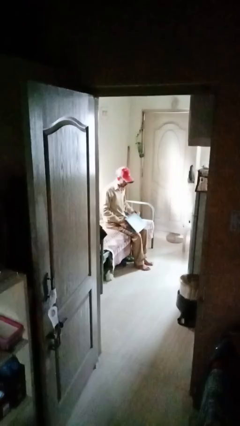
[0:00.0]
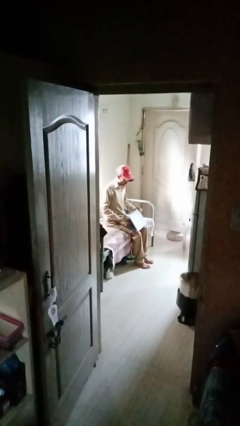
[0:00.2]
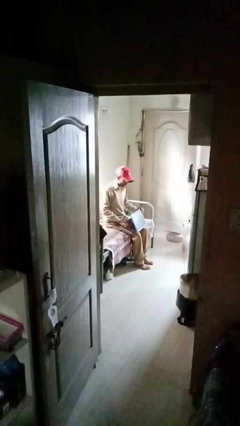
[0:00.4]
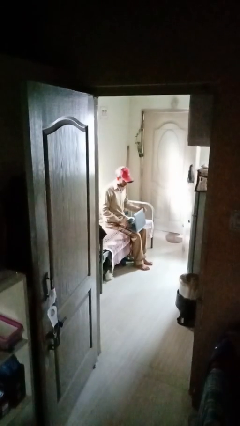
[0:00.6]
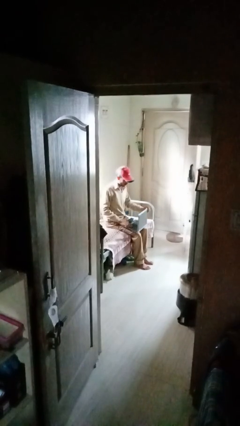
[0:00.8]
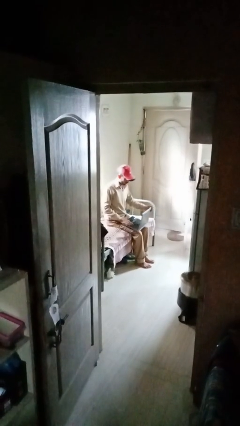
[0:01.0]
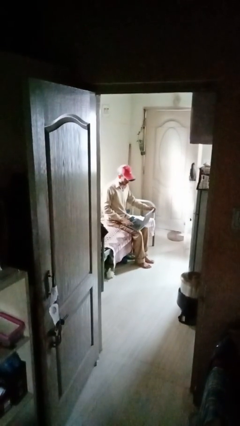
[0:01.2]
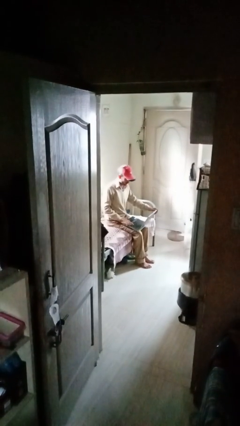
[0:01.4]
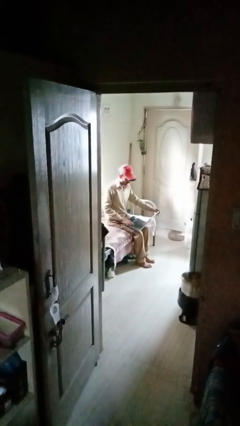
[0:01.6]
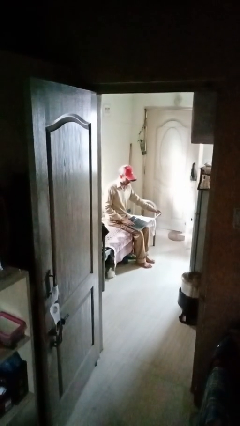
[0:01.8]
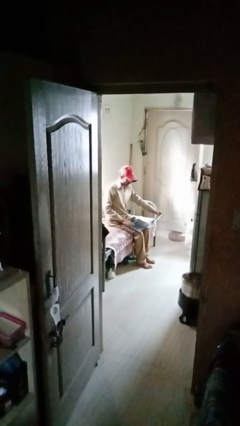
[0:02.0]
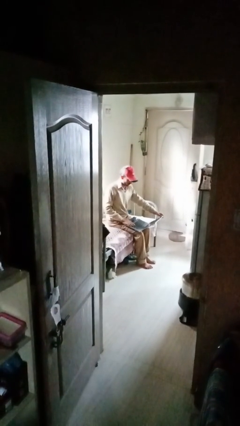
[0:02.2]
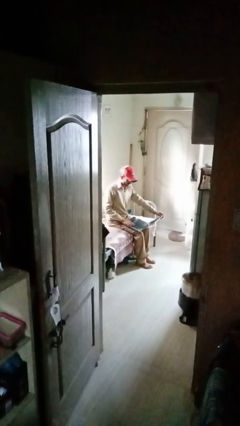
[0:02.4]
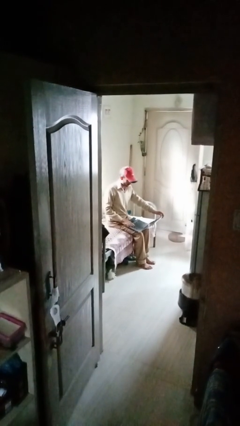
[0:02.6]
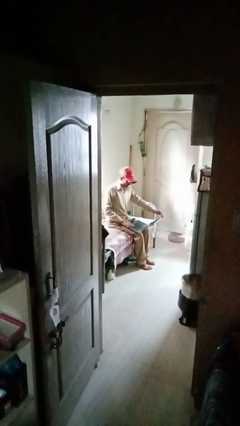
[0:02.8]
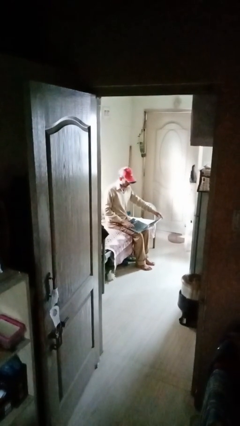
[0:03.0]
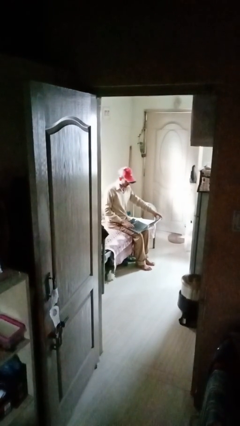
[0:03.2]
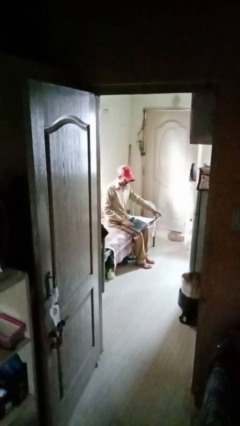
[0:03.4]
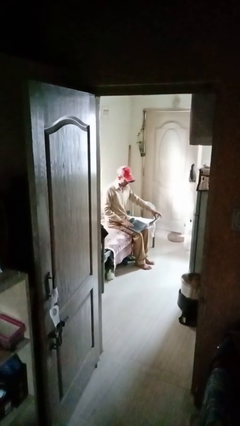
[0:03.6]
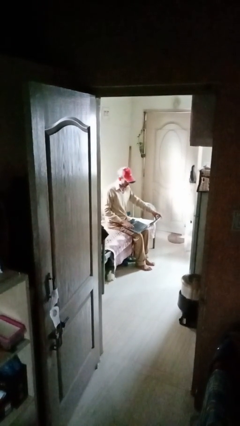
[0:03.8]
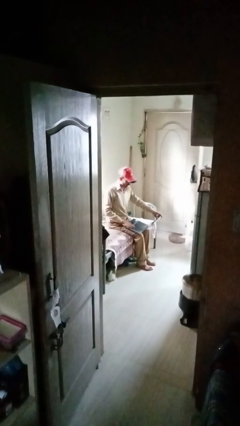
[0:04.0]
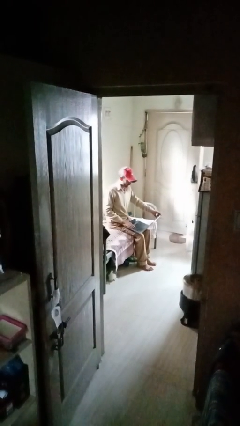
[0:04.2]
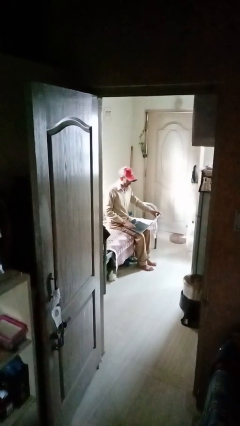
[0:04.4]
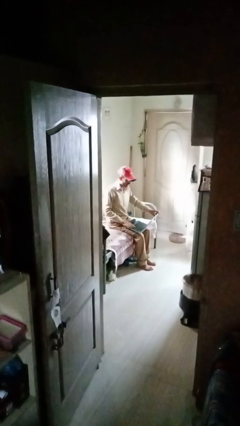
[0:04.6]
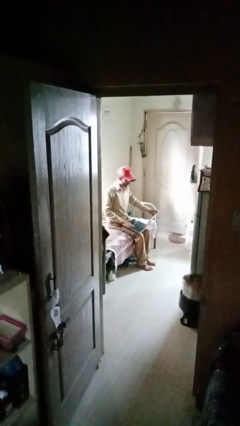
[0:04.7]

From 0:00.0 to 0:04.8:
person opens laptop

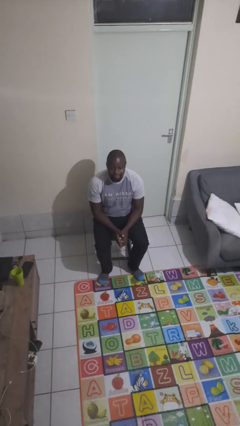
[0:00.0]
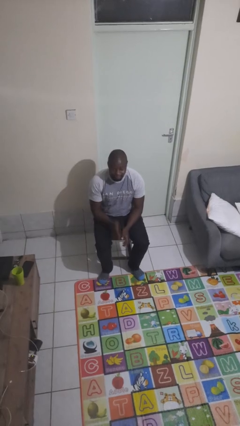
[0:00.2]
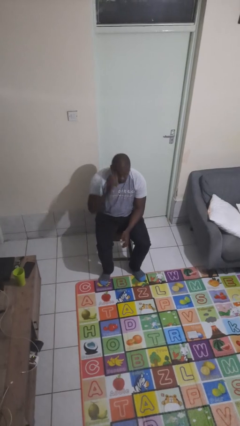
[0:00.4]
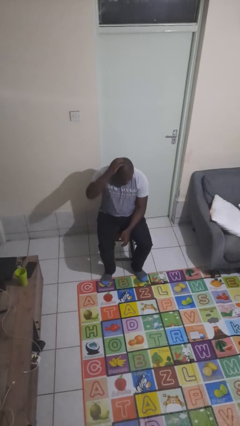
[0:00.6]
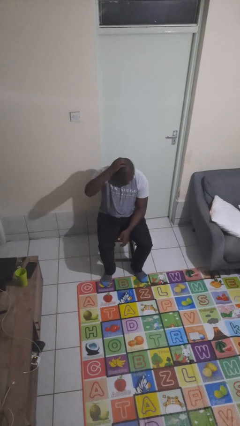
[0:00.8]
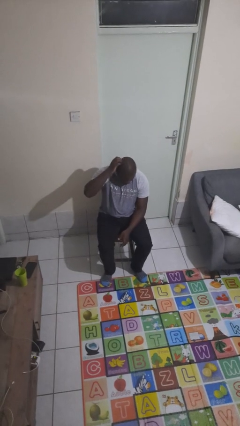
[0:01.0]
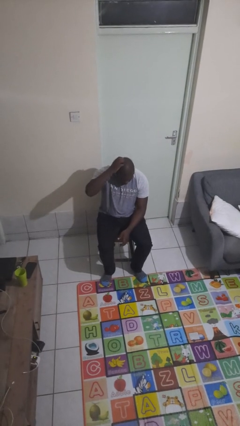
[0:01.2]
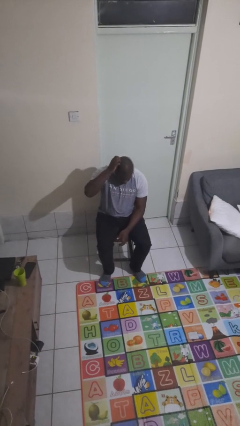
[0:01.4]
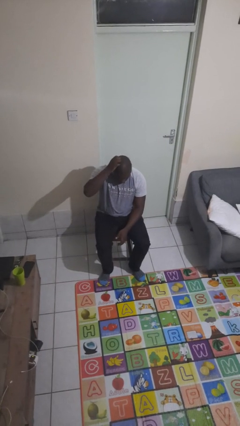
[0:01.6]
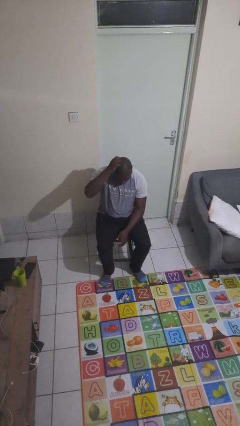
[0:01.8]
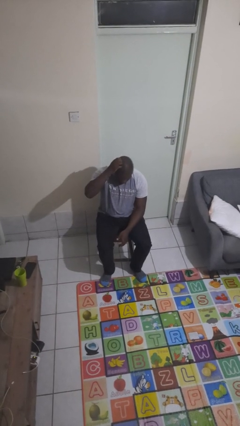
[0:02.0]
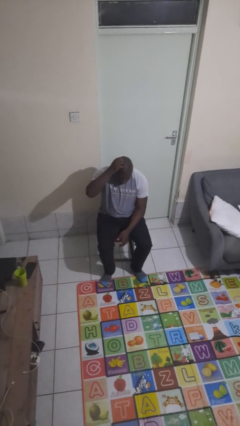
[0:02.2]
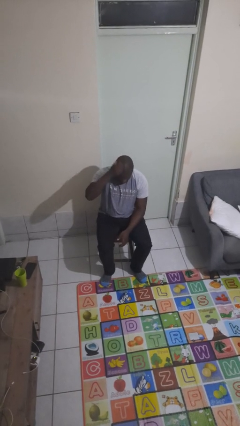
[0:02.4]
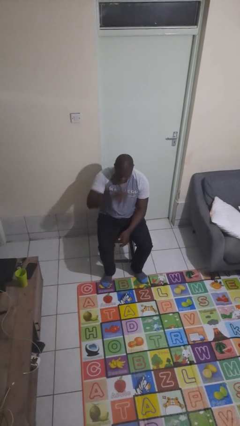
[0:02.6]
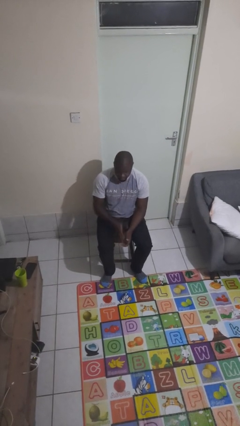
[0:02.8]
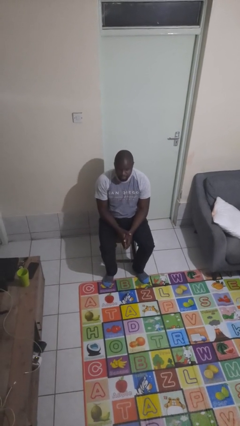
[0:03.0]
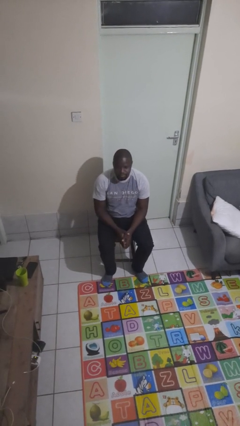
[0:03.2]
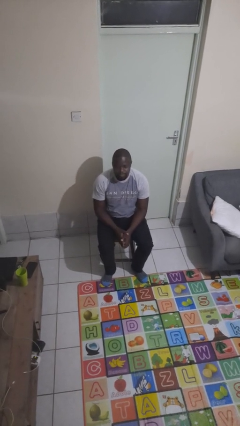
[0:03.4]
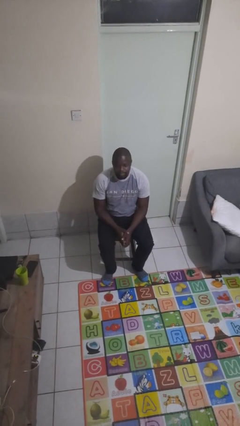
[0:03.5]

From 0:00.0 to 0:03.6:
person scratches face

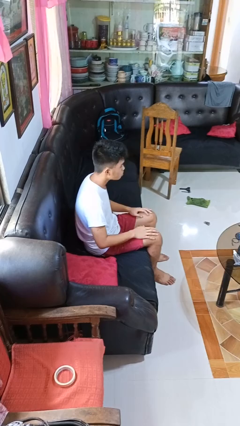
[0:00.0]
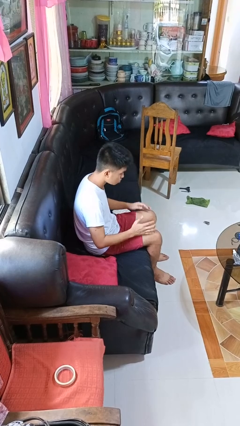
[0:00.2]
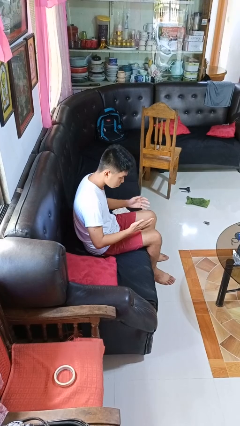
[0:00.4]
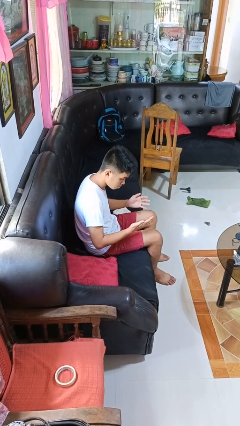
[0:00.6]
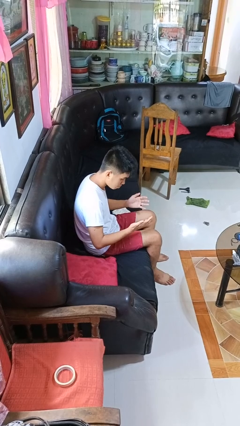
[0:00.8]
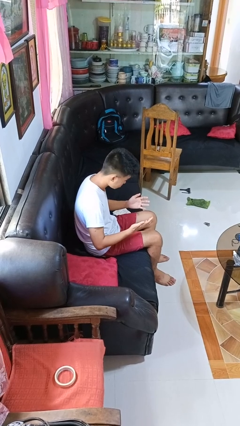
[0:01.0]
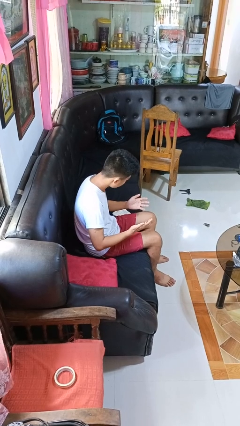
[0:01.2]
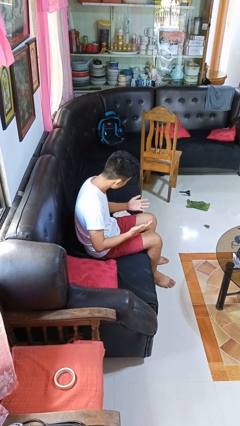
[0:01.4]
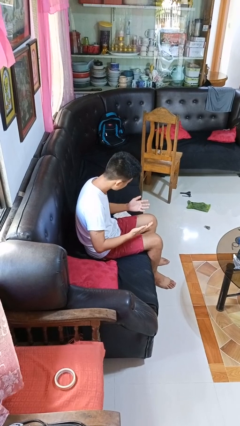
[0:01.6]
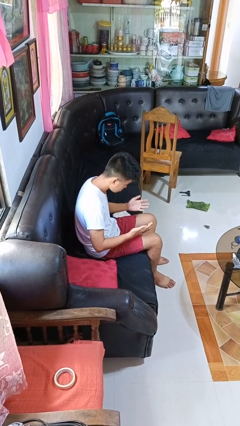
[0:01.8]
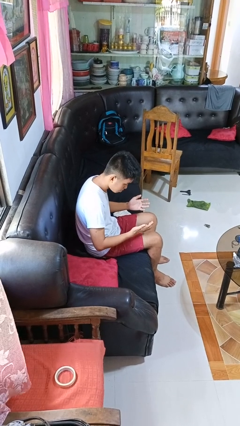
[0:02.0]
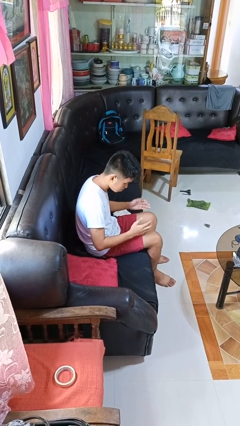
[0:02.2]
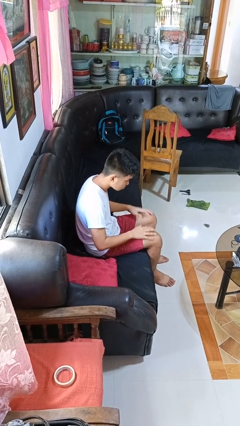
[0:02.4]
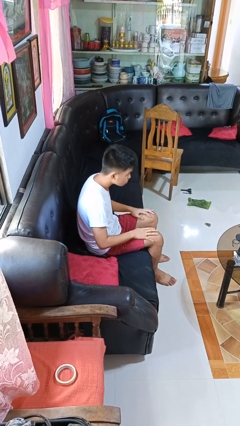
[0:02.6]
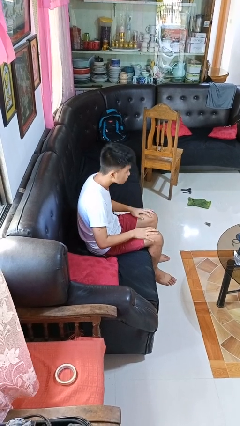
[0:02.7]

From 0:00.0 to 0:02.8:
person looks at hands in lap

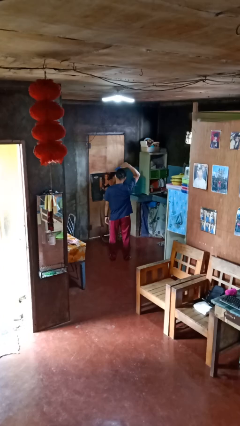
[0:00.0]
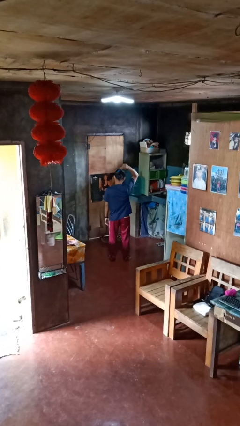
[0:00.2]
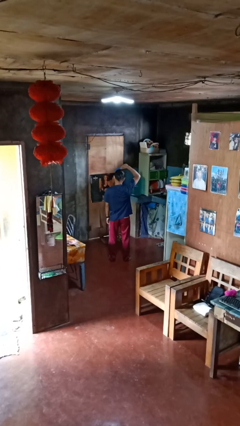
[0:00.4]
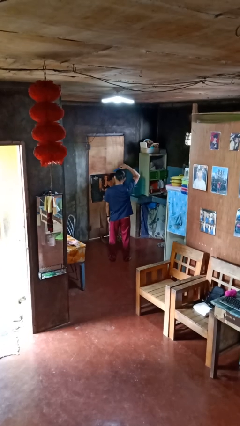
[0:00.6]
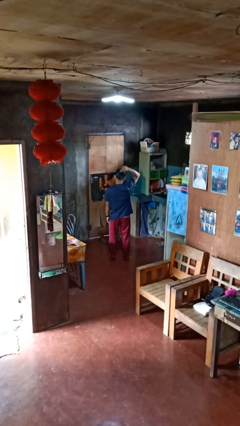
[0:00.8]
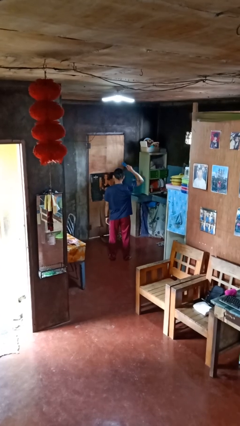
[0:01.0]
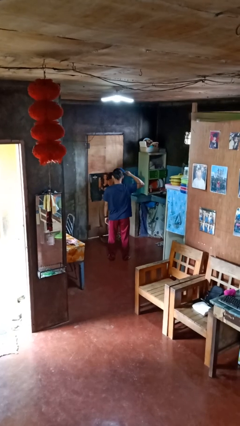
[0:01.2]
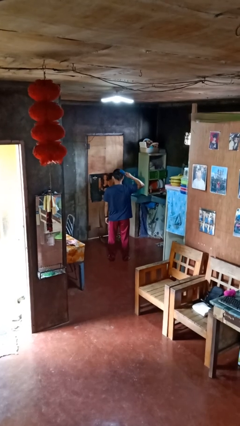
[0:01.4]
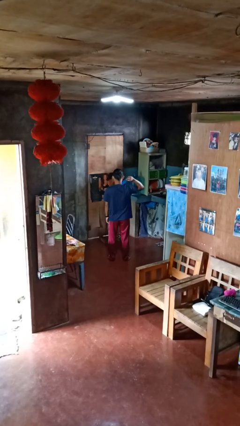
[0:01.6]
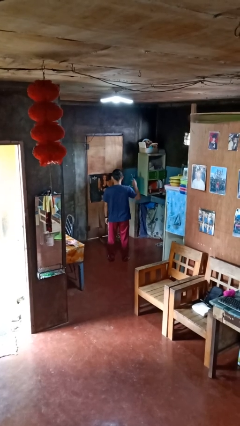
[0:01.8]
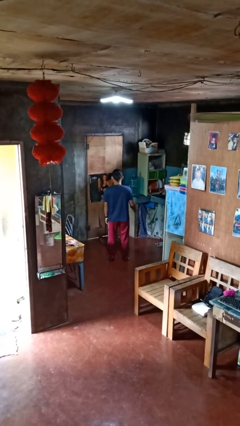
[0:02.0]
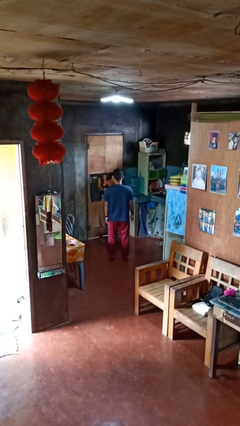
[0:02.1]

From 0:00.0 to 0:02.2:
person brushes hair

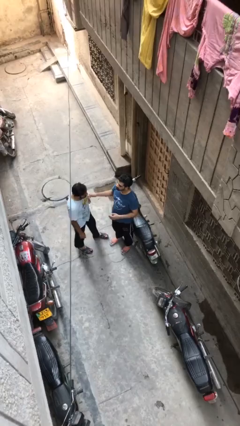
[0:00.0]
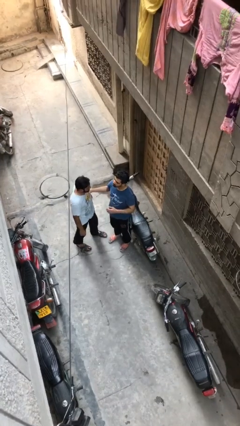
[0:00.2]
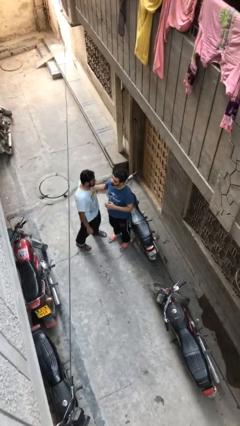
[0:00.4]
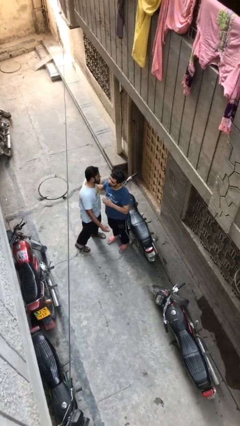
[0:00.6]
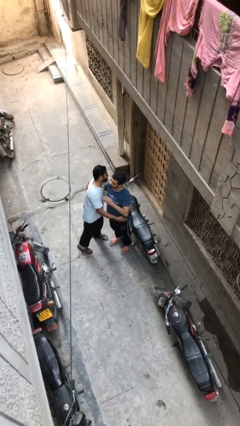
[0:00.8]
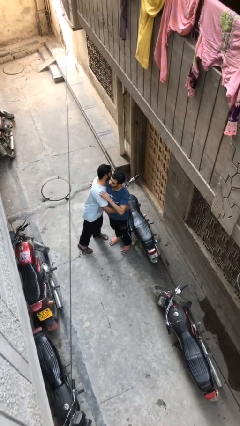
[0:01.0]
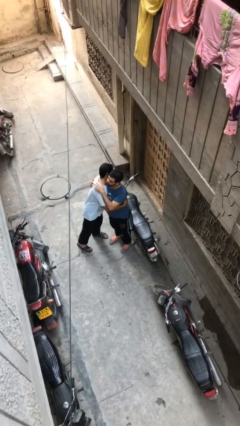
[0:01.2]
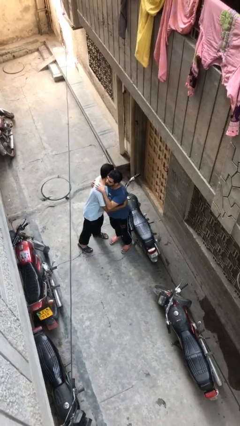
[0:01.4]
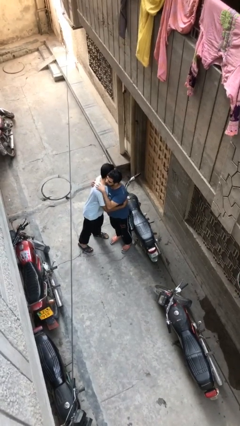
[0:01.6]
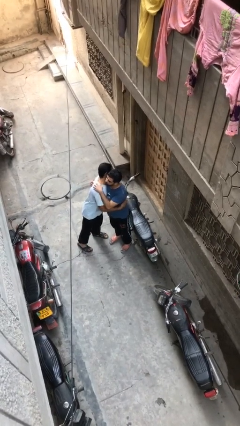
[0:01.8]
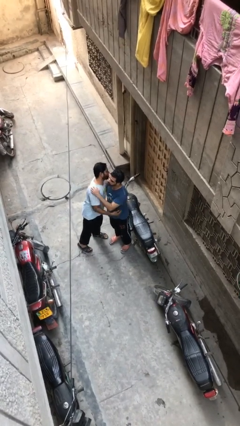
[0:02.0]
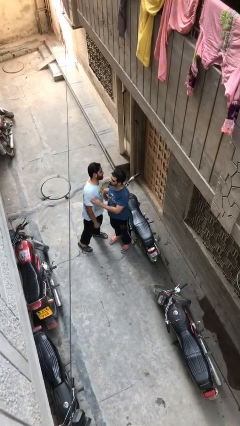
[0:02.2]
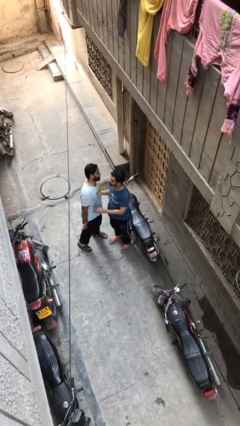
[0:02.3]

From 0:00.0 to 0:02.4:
person embraces person

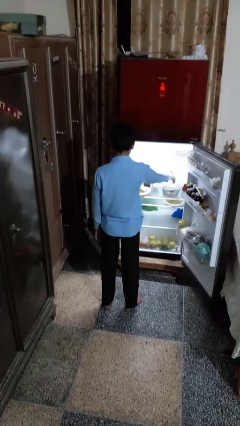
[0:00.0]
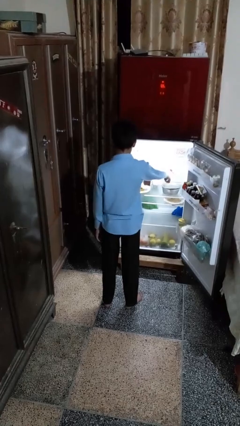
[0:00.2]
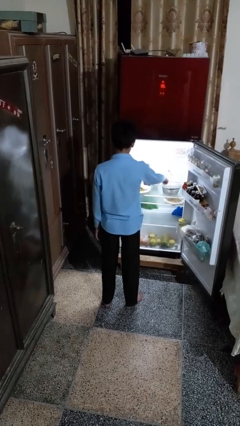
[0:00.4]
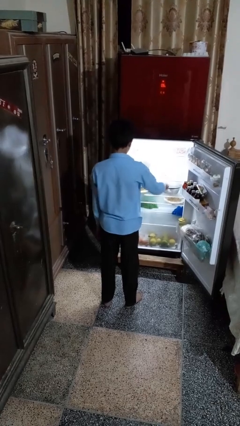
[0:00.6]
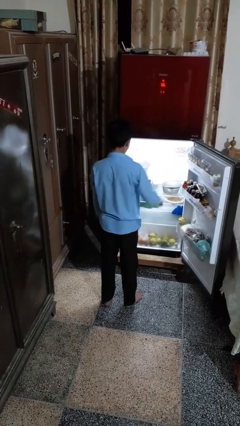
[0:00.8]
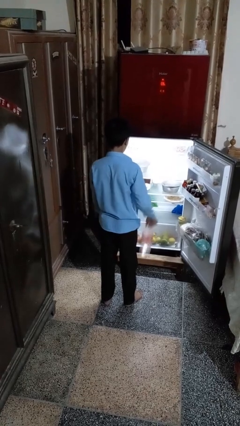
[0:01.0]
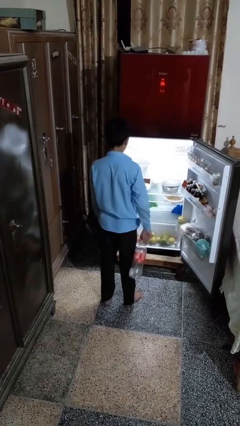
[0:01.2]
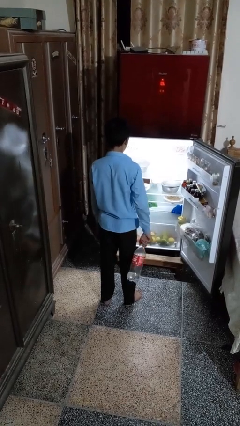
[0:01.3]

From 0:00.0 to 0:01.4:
person takes object from refrigerator
